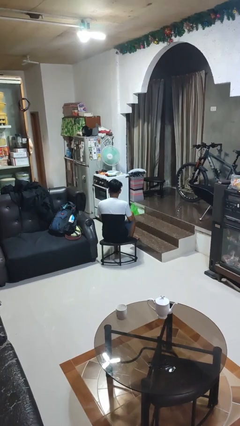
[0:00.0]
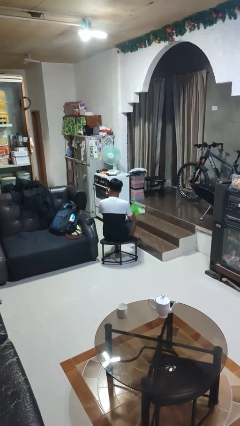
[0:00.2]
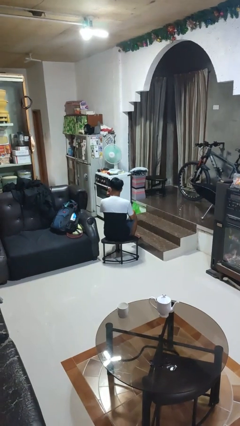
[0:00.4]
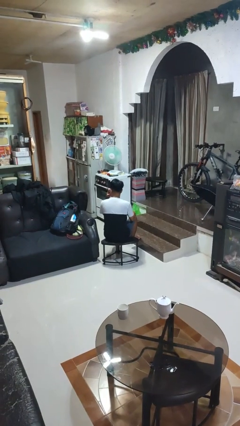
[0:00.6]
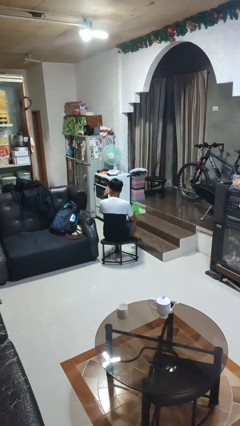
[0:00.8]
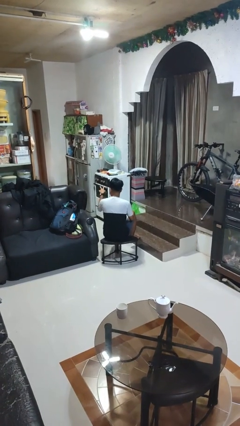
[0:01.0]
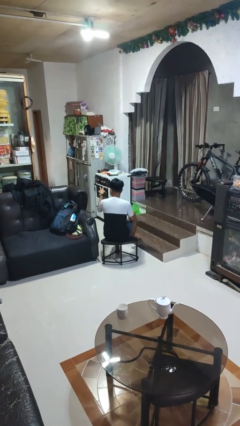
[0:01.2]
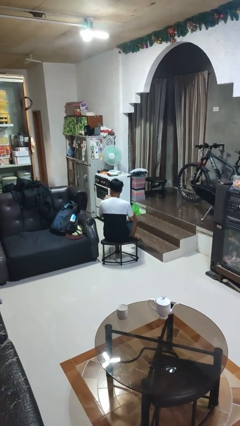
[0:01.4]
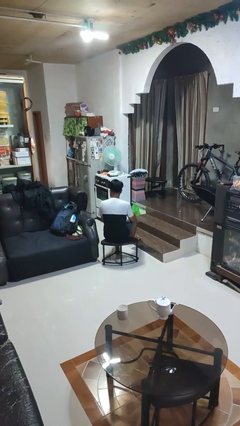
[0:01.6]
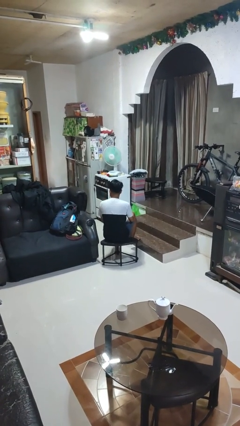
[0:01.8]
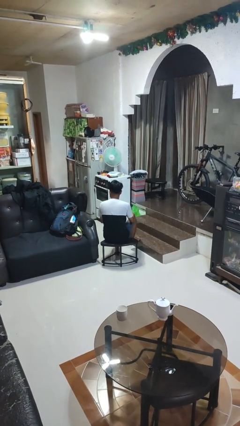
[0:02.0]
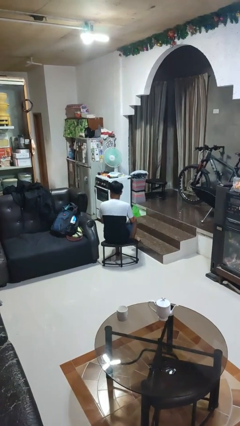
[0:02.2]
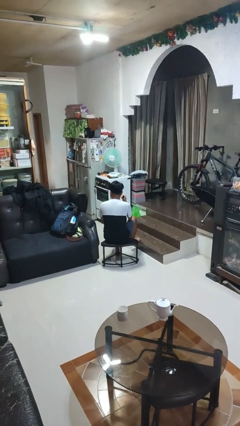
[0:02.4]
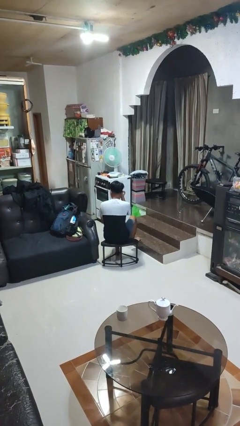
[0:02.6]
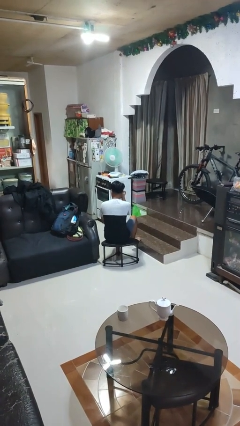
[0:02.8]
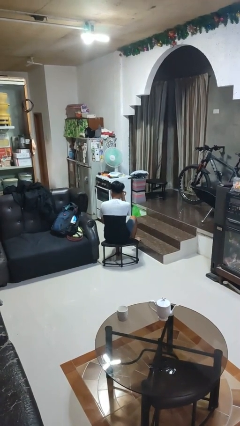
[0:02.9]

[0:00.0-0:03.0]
person gestures watch closely

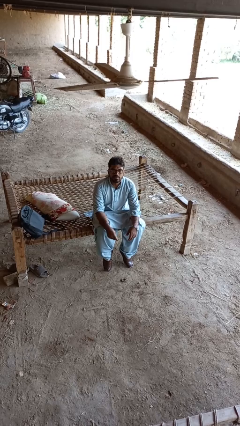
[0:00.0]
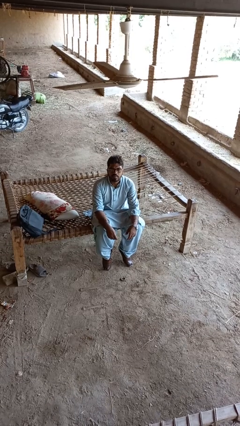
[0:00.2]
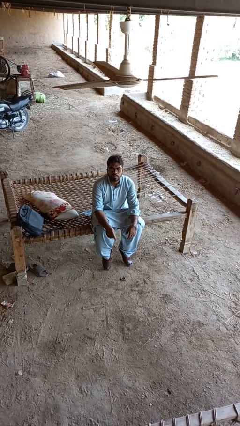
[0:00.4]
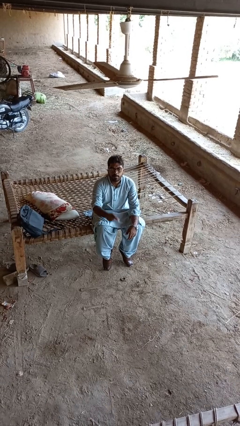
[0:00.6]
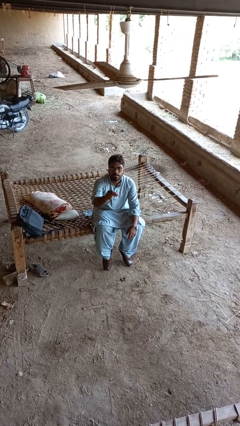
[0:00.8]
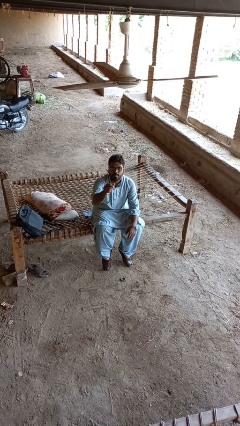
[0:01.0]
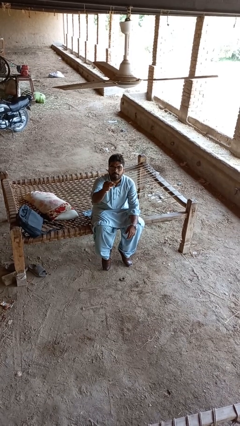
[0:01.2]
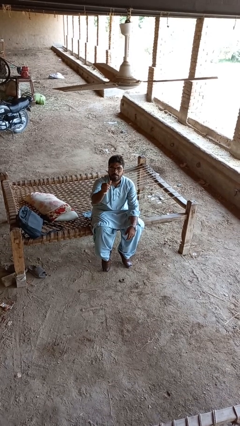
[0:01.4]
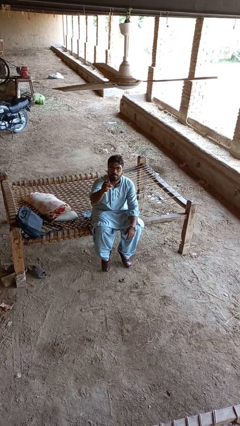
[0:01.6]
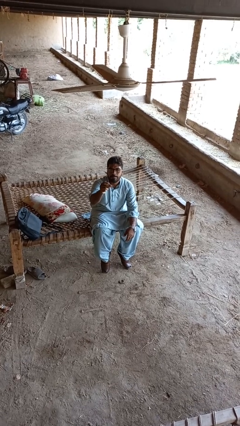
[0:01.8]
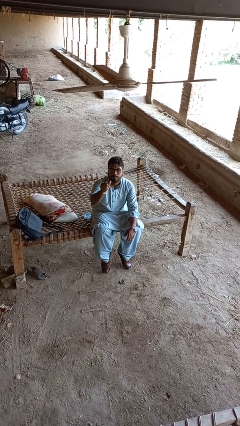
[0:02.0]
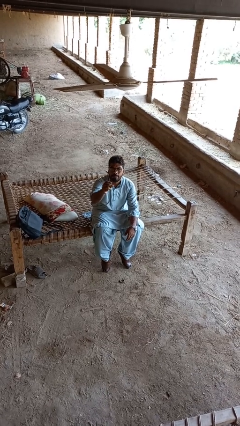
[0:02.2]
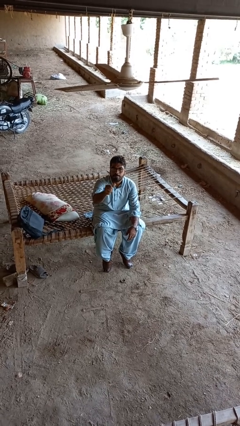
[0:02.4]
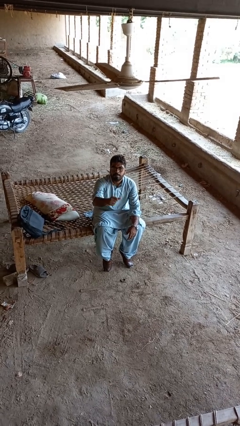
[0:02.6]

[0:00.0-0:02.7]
person snaps fingers

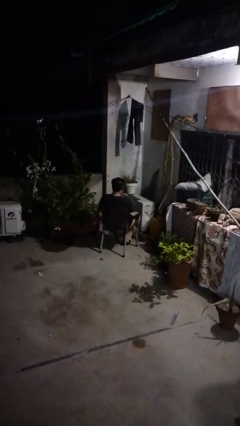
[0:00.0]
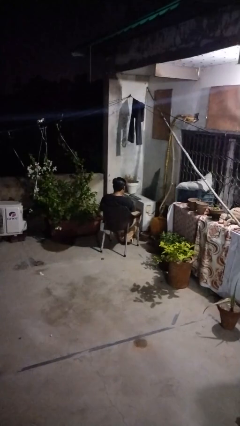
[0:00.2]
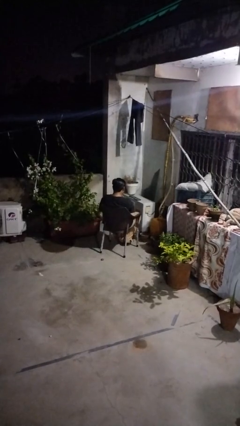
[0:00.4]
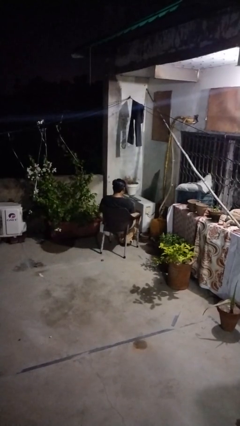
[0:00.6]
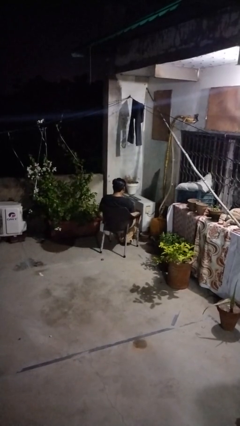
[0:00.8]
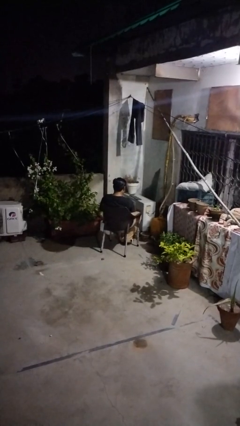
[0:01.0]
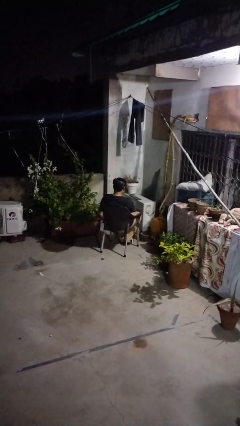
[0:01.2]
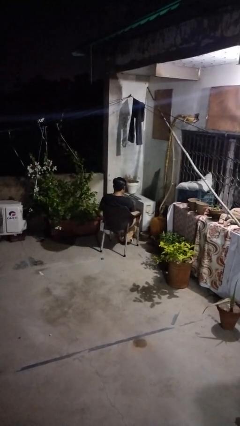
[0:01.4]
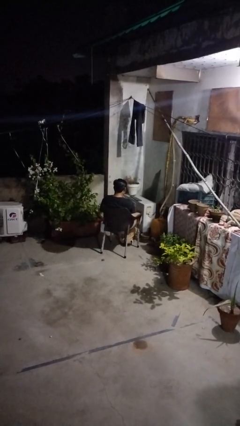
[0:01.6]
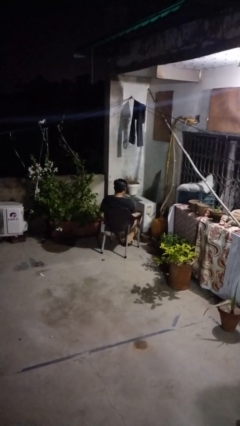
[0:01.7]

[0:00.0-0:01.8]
person blows nose

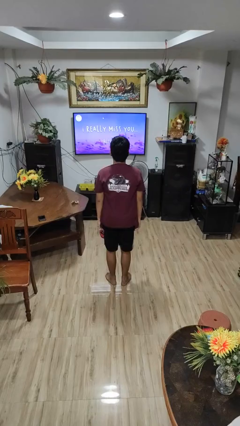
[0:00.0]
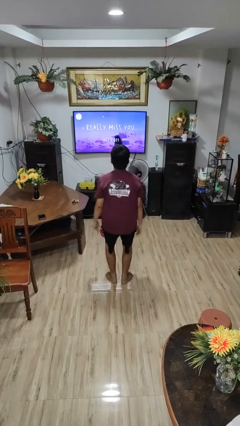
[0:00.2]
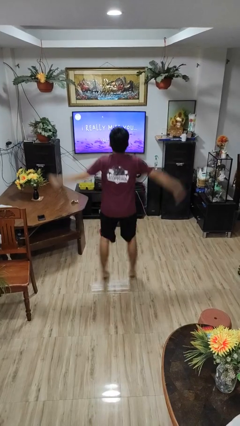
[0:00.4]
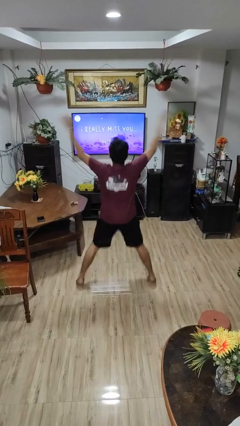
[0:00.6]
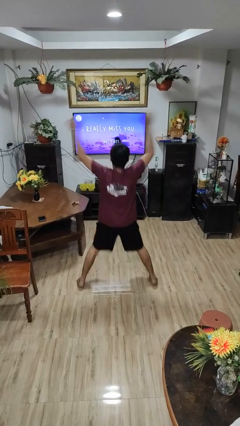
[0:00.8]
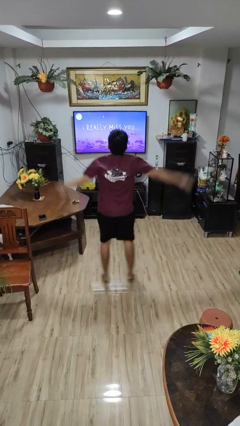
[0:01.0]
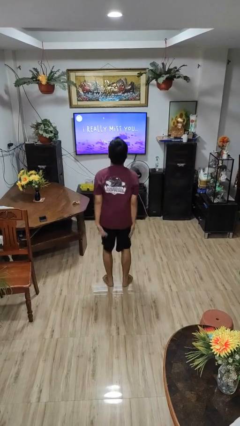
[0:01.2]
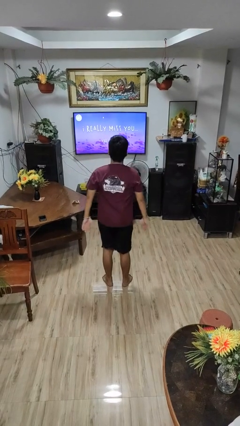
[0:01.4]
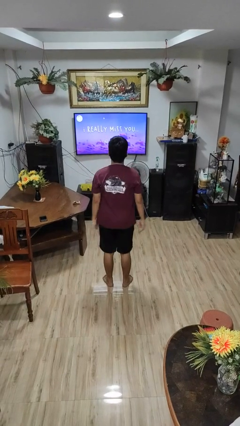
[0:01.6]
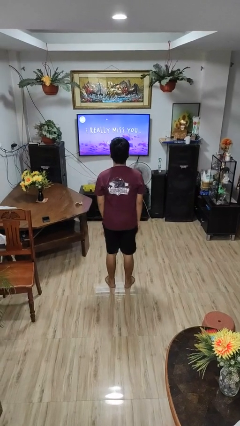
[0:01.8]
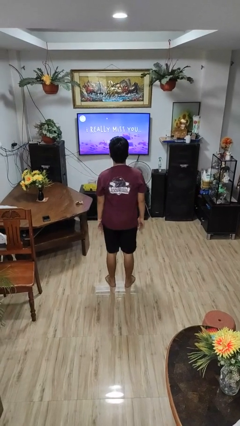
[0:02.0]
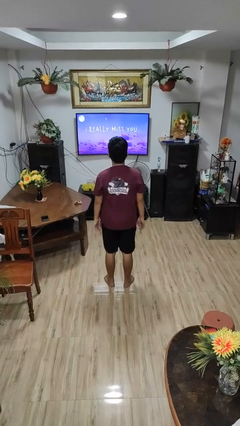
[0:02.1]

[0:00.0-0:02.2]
person exercises with jumping jacks

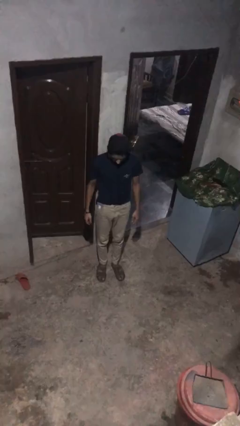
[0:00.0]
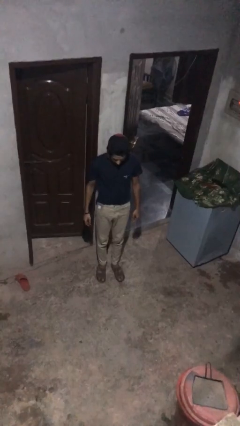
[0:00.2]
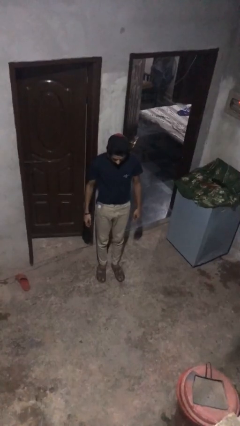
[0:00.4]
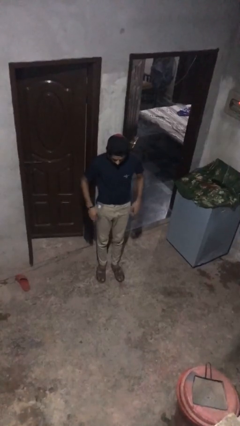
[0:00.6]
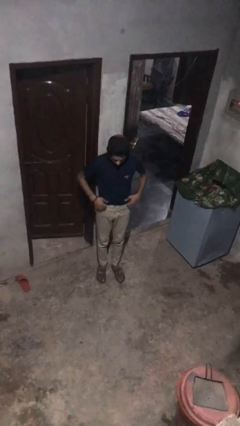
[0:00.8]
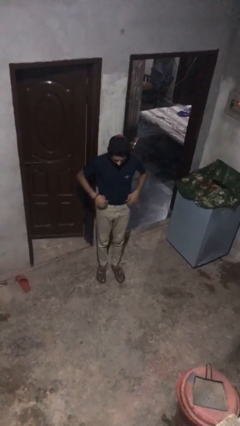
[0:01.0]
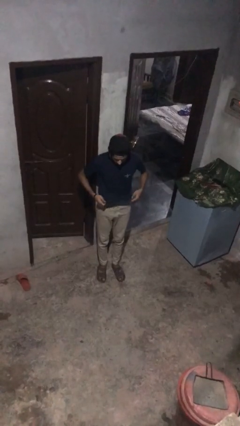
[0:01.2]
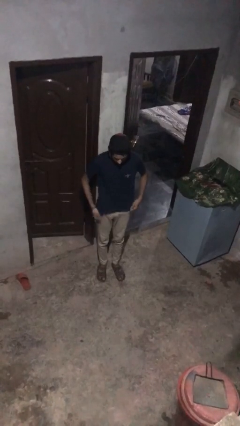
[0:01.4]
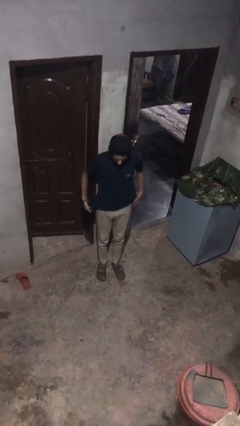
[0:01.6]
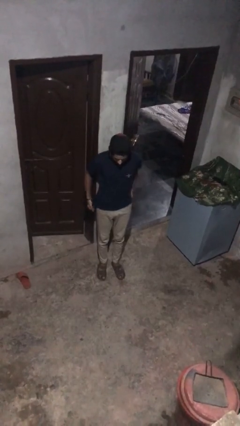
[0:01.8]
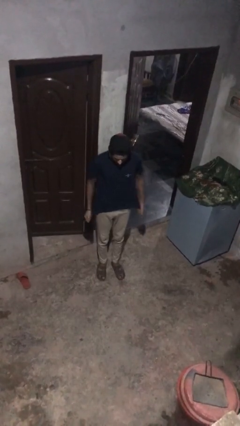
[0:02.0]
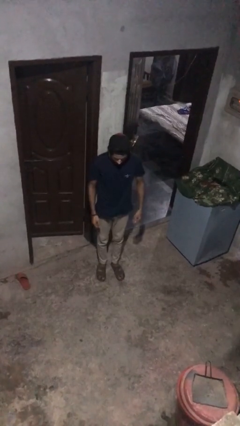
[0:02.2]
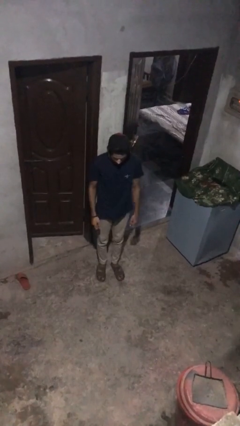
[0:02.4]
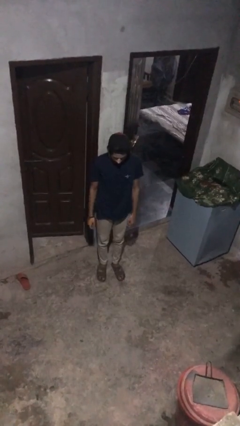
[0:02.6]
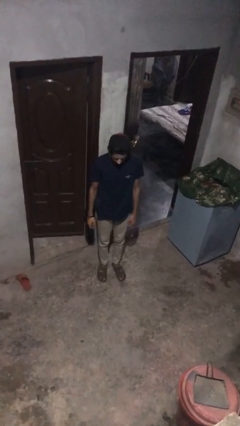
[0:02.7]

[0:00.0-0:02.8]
person untucks shirt

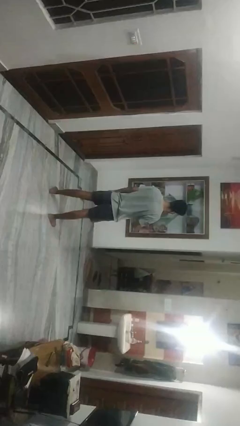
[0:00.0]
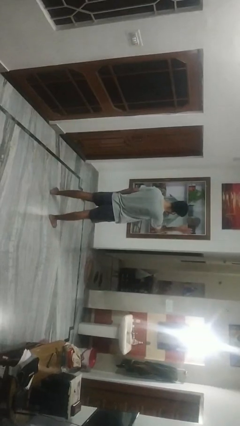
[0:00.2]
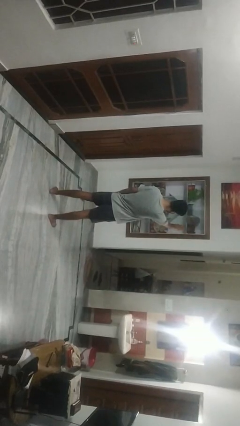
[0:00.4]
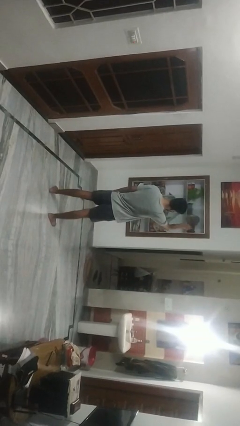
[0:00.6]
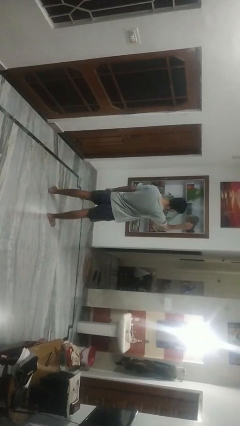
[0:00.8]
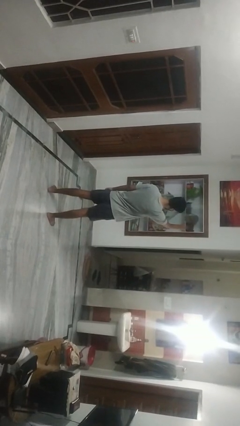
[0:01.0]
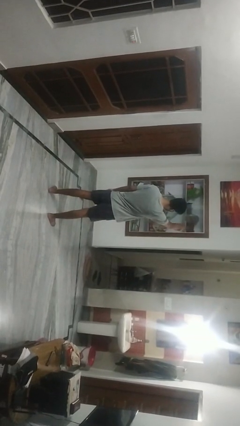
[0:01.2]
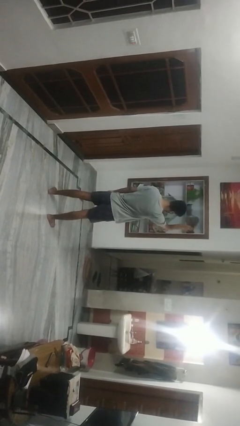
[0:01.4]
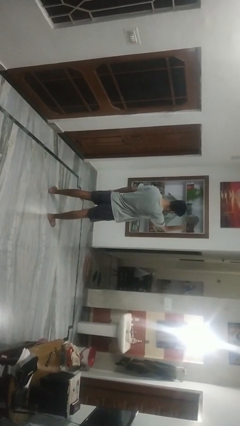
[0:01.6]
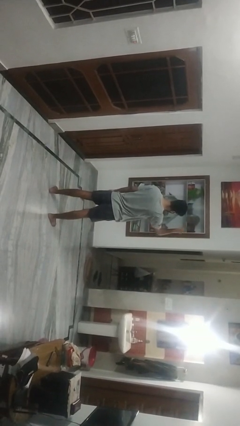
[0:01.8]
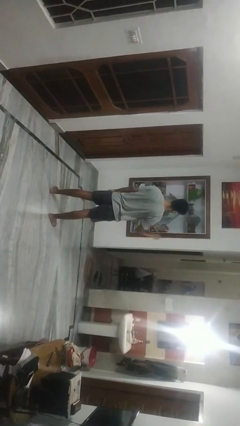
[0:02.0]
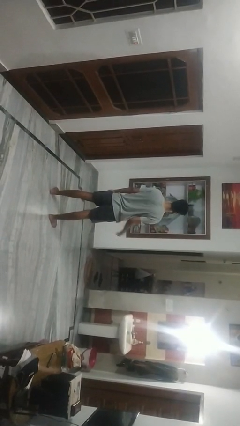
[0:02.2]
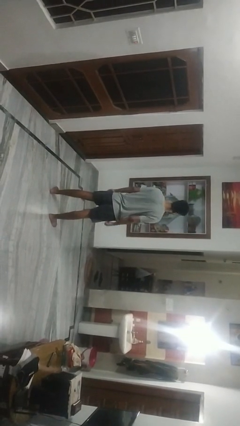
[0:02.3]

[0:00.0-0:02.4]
person gestures come here

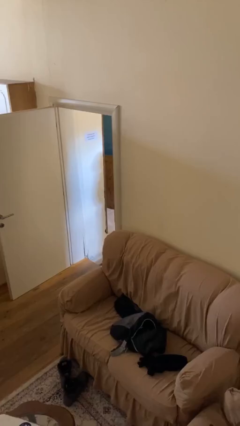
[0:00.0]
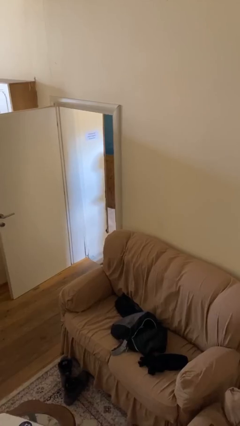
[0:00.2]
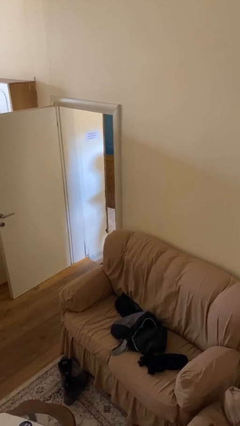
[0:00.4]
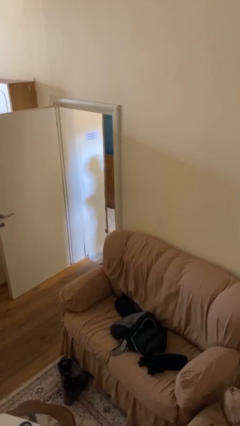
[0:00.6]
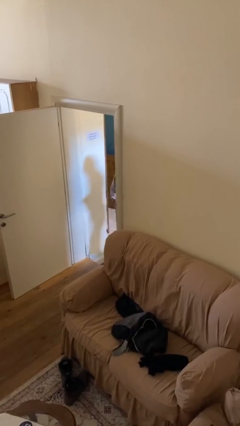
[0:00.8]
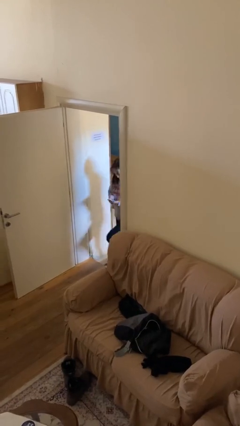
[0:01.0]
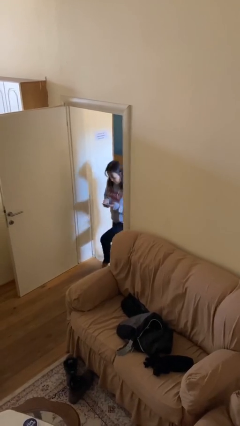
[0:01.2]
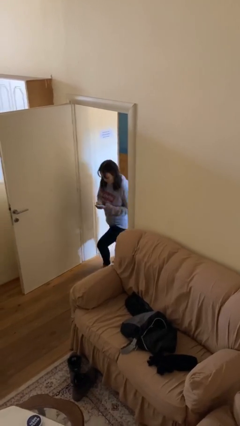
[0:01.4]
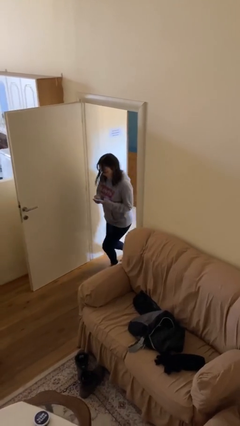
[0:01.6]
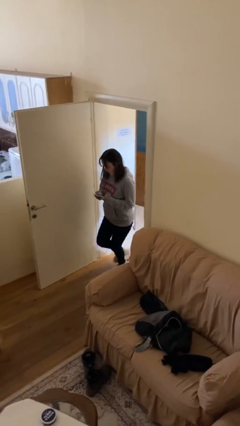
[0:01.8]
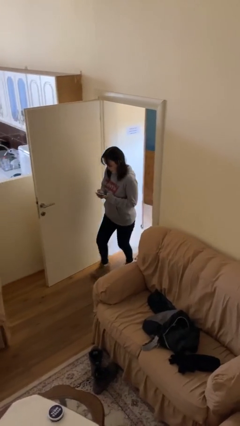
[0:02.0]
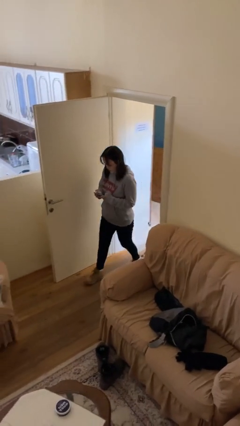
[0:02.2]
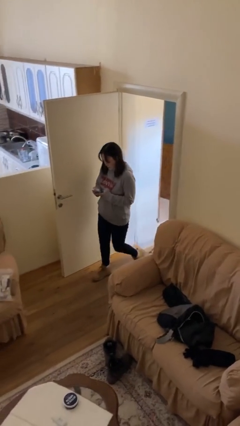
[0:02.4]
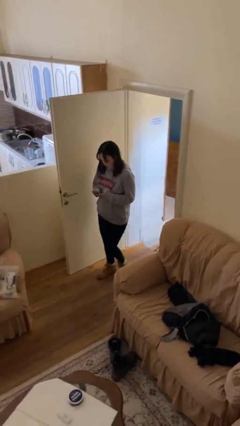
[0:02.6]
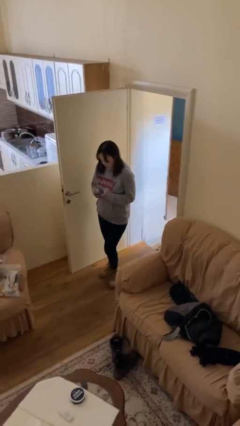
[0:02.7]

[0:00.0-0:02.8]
person enters scene through structure

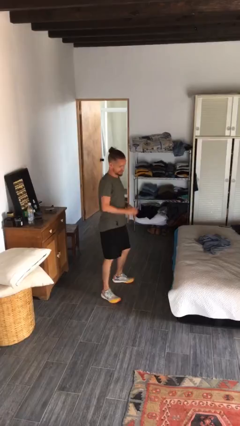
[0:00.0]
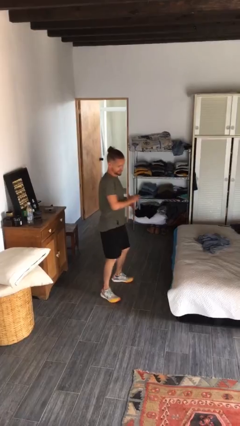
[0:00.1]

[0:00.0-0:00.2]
person karate chop
